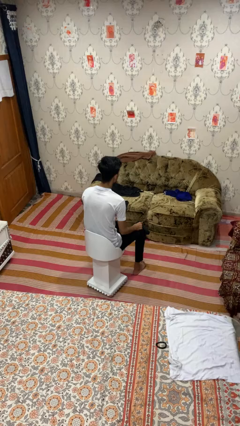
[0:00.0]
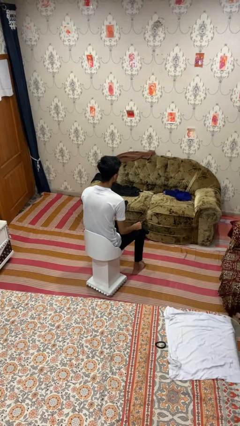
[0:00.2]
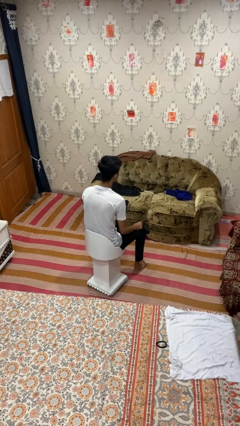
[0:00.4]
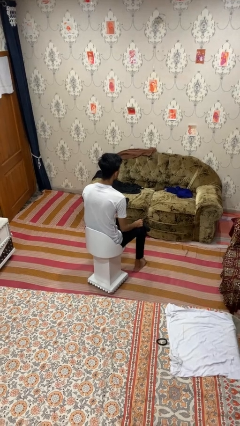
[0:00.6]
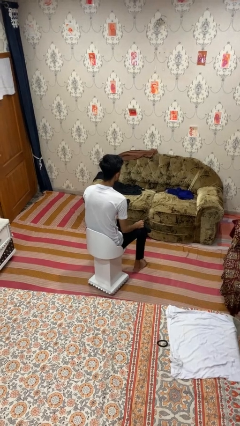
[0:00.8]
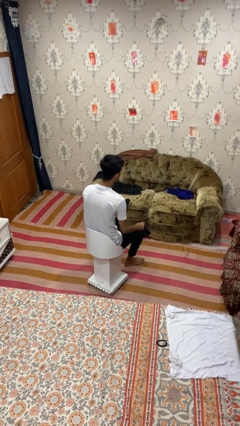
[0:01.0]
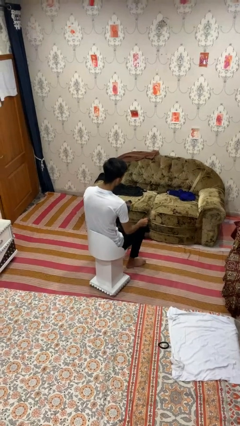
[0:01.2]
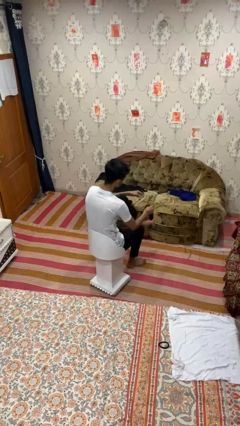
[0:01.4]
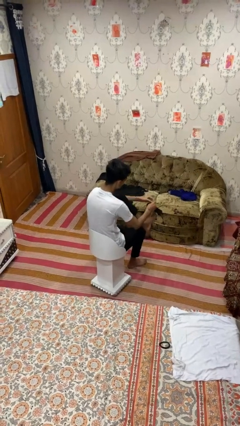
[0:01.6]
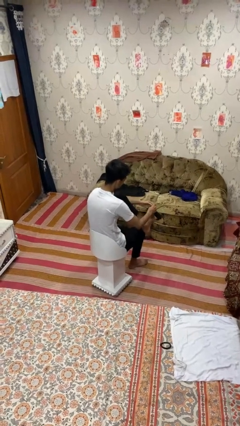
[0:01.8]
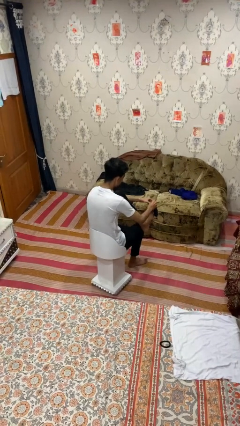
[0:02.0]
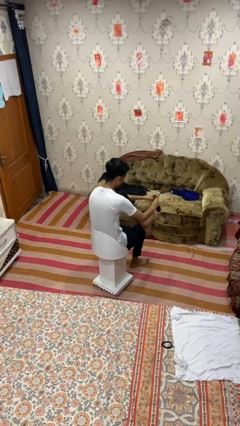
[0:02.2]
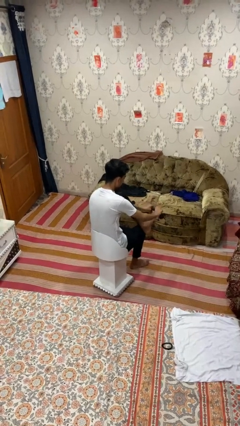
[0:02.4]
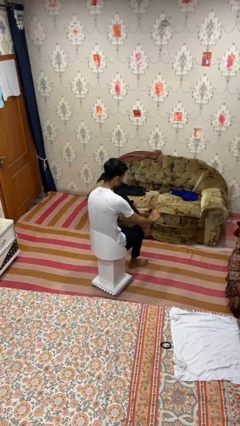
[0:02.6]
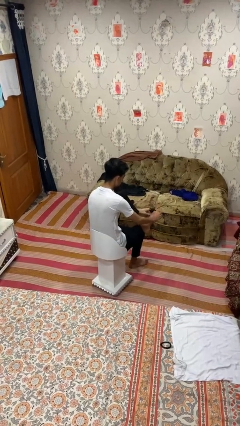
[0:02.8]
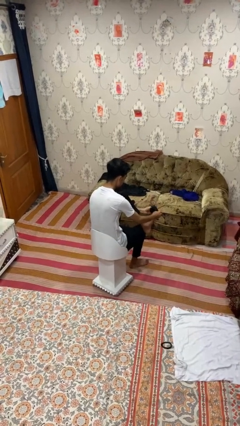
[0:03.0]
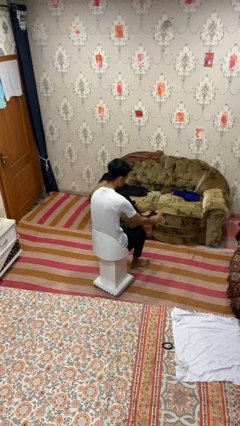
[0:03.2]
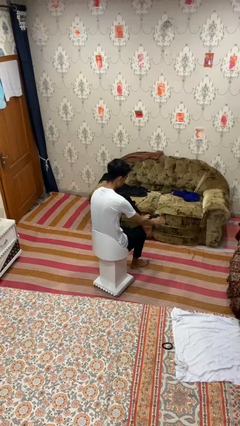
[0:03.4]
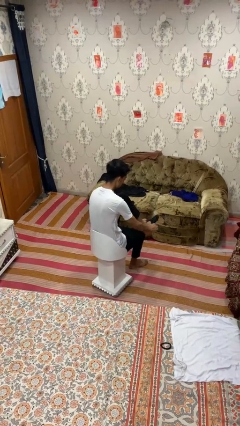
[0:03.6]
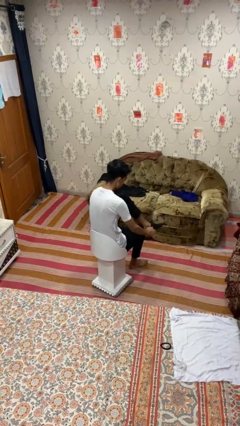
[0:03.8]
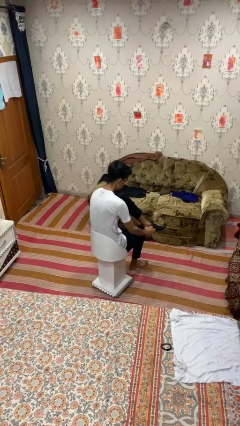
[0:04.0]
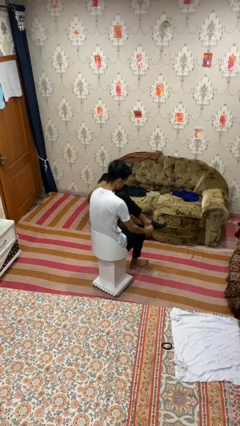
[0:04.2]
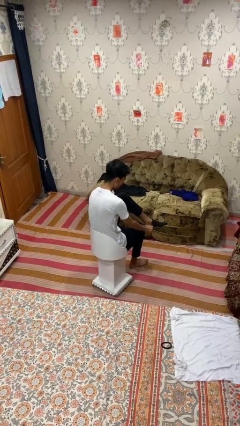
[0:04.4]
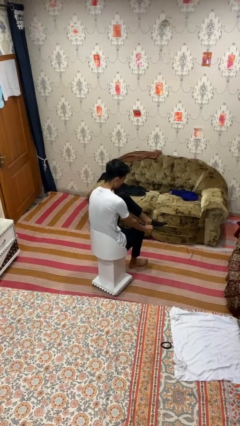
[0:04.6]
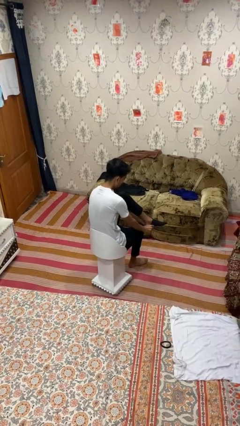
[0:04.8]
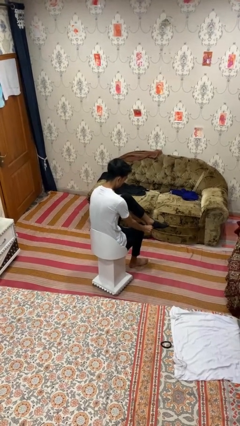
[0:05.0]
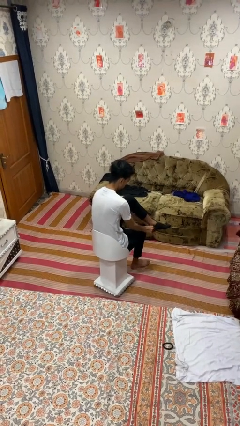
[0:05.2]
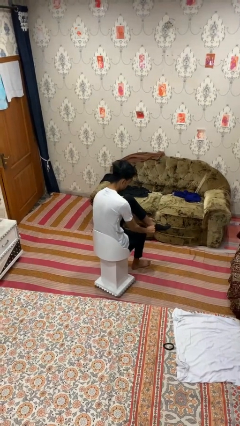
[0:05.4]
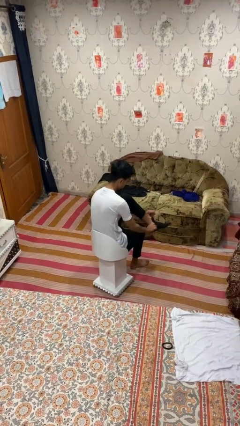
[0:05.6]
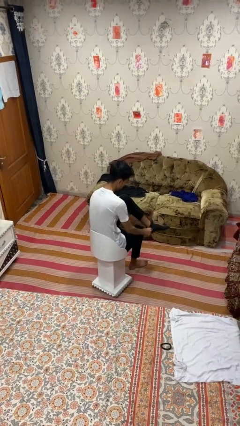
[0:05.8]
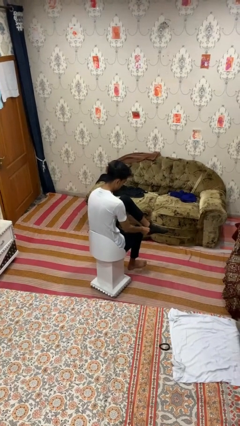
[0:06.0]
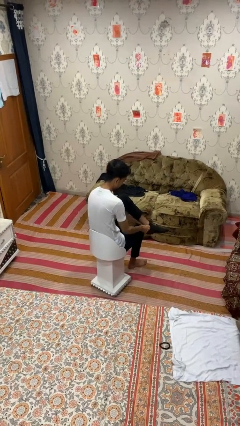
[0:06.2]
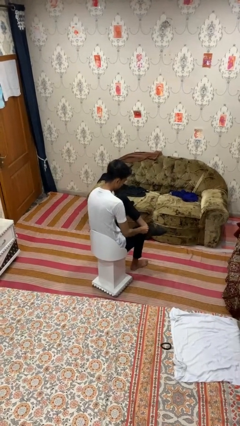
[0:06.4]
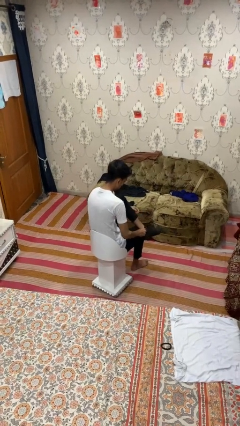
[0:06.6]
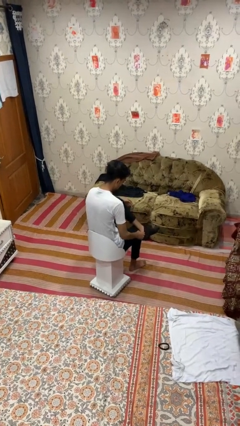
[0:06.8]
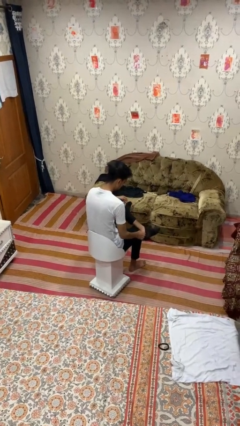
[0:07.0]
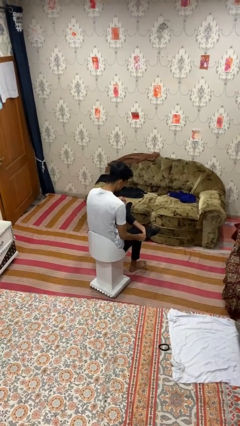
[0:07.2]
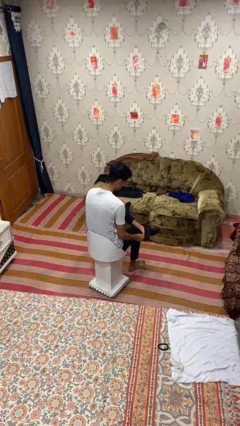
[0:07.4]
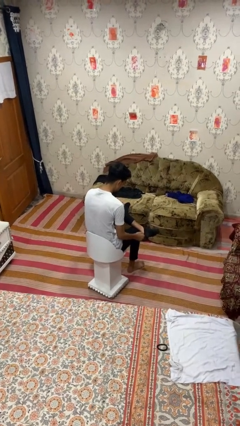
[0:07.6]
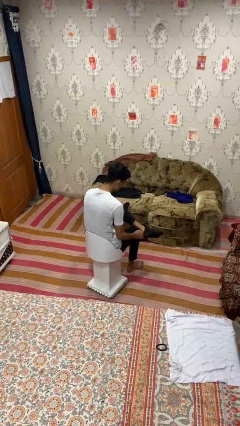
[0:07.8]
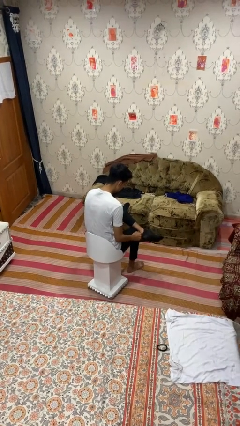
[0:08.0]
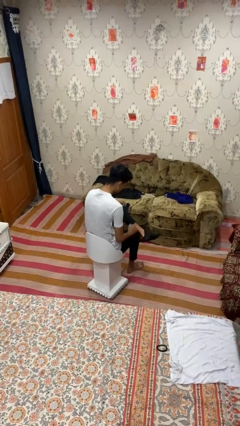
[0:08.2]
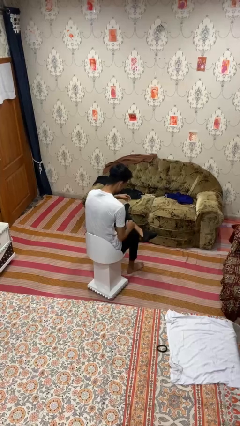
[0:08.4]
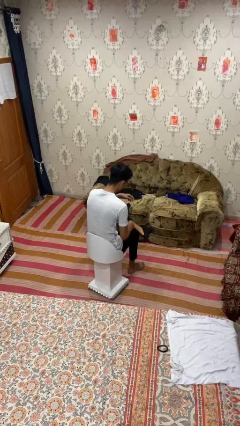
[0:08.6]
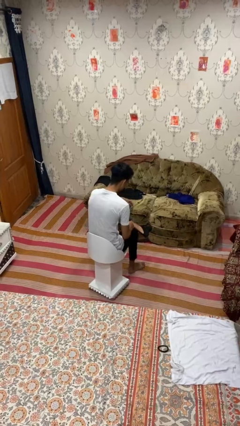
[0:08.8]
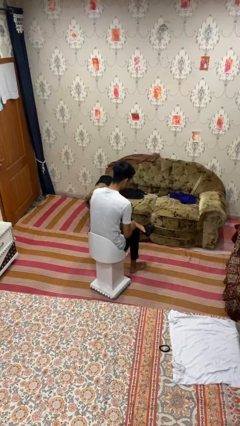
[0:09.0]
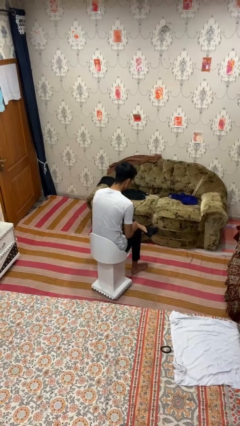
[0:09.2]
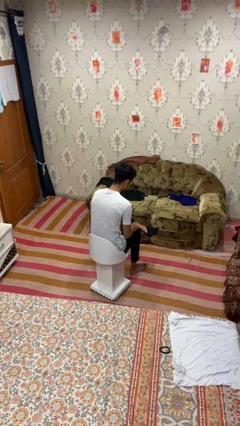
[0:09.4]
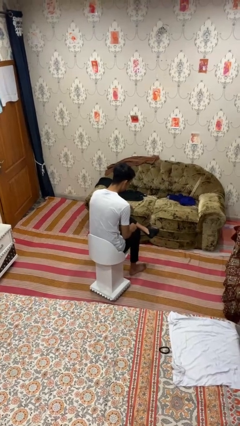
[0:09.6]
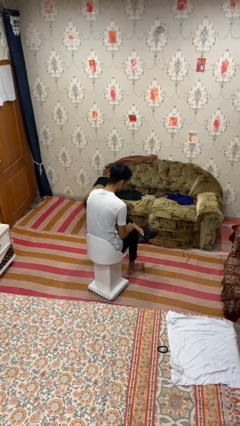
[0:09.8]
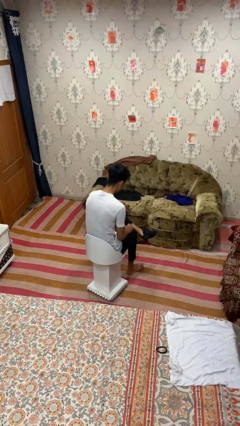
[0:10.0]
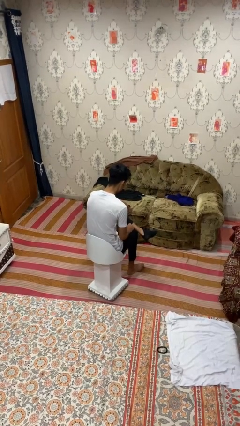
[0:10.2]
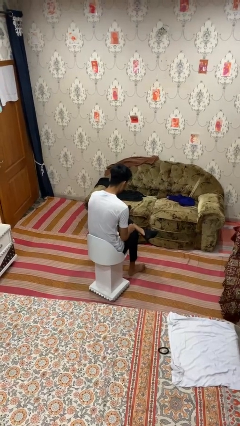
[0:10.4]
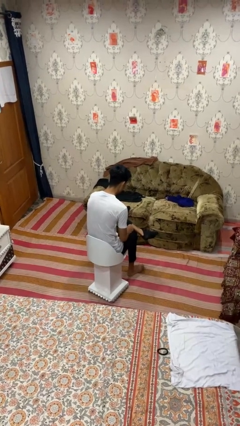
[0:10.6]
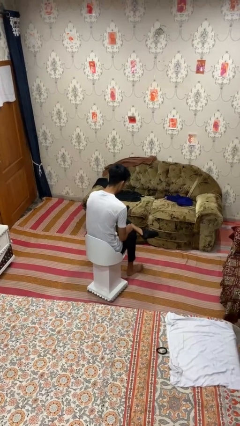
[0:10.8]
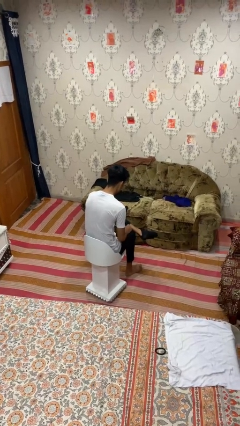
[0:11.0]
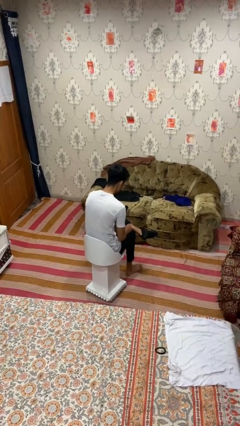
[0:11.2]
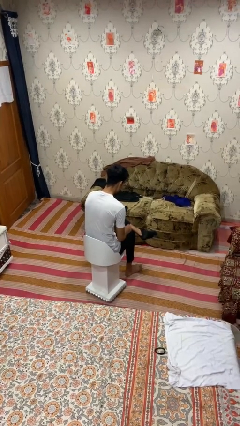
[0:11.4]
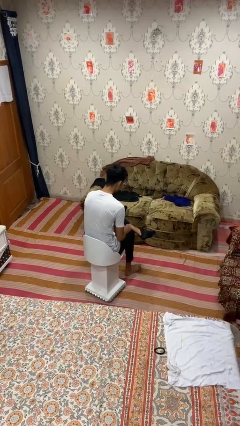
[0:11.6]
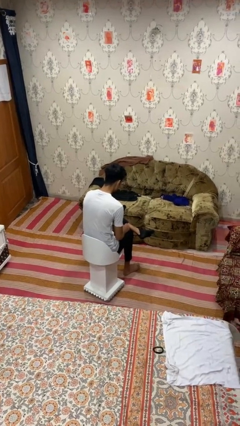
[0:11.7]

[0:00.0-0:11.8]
person puts on socks

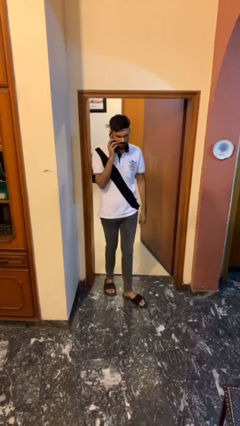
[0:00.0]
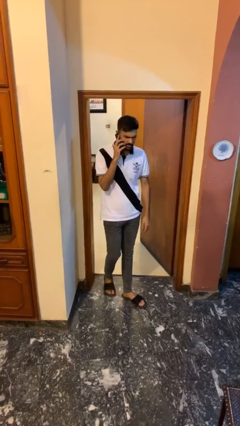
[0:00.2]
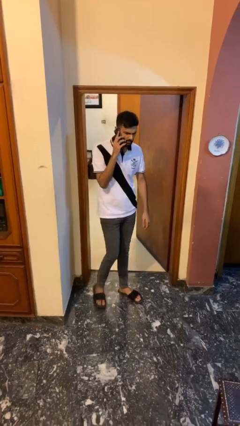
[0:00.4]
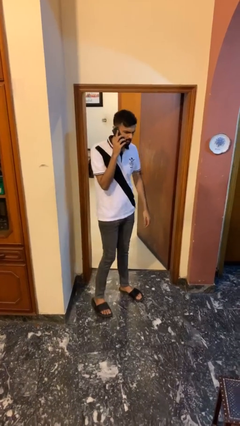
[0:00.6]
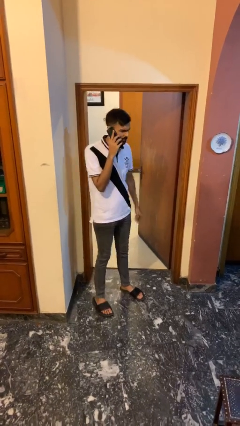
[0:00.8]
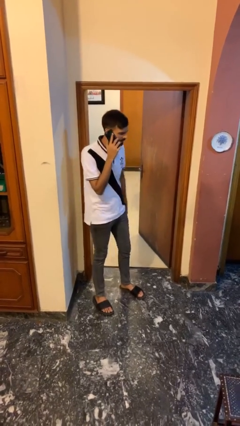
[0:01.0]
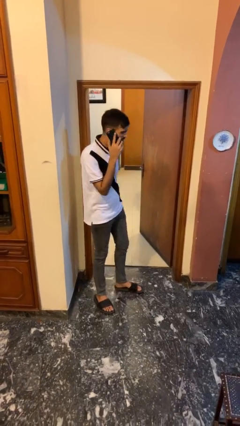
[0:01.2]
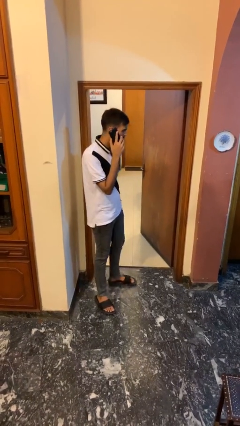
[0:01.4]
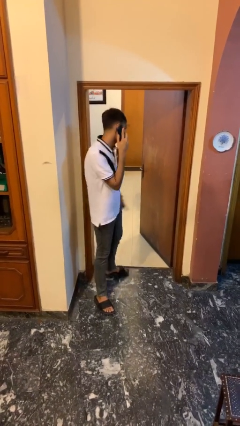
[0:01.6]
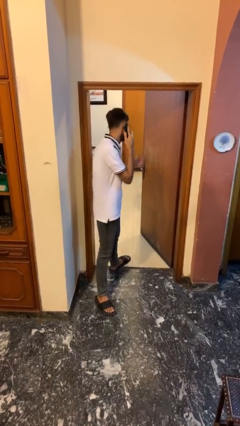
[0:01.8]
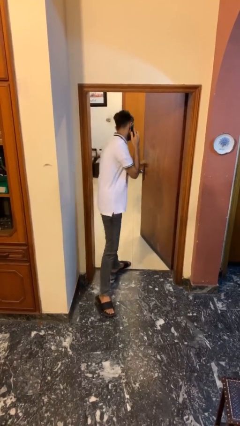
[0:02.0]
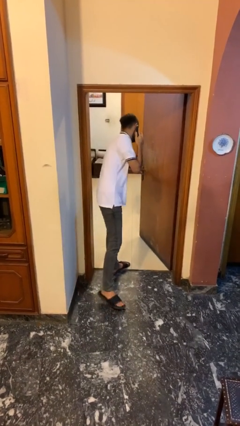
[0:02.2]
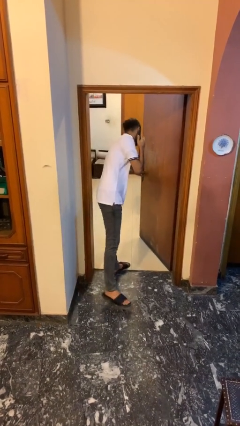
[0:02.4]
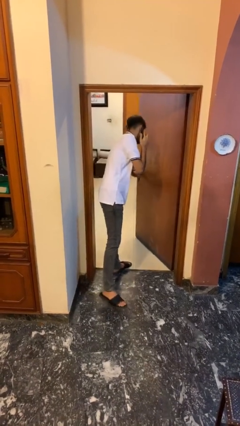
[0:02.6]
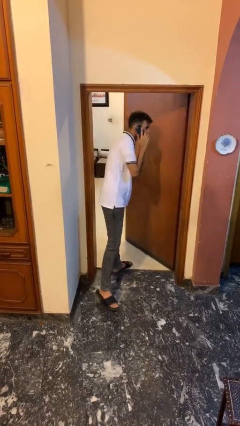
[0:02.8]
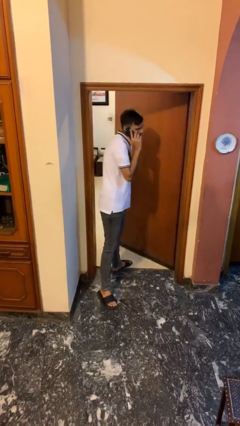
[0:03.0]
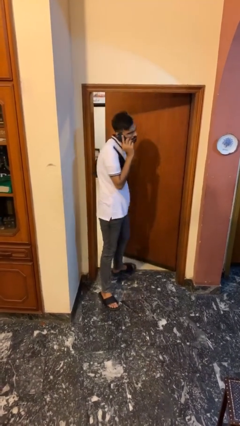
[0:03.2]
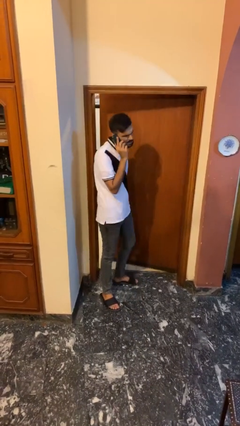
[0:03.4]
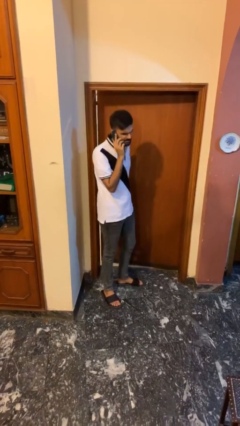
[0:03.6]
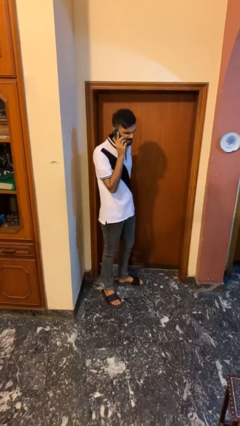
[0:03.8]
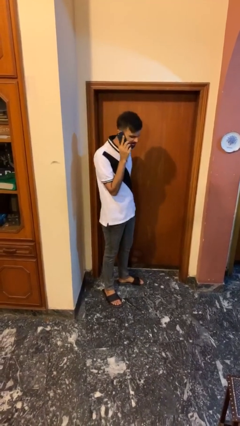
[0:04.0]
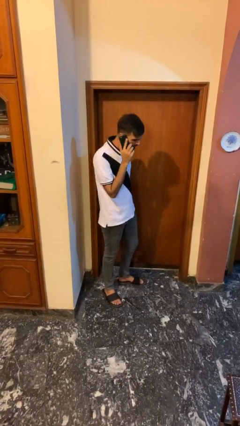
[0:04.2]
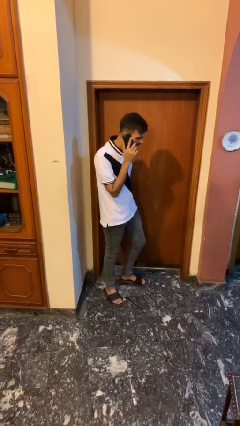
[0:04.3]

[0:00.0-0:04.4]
person closes facility door

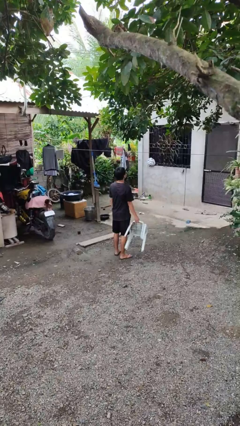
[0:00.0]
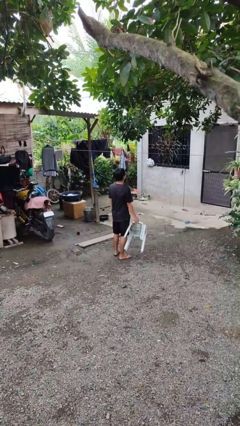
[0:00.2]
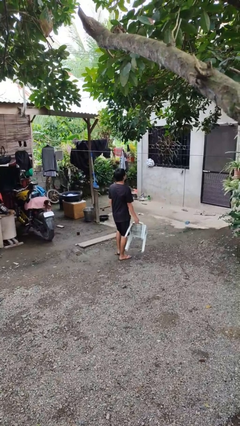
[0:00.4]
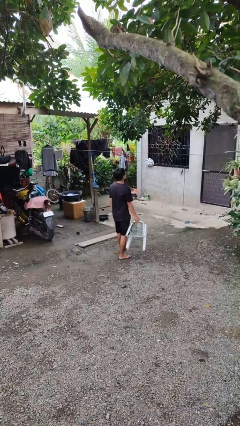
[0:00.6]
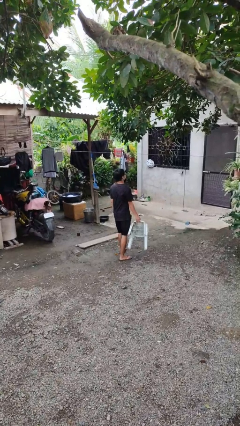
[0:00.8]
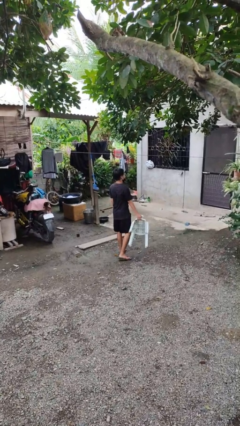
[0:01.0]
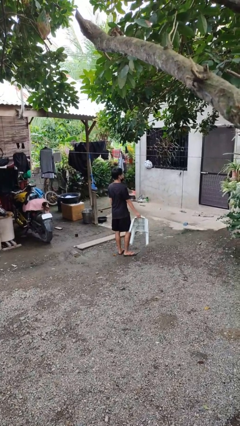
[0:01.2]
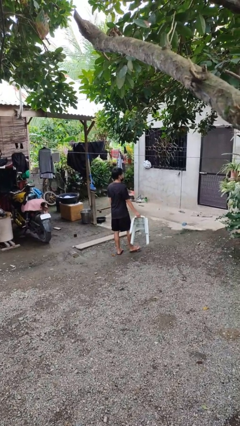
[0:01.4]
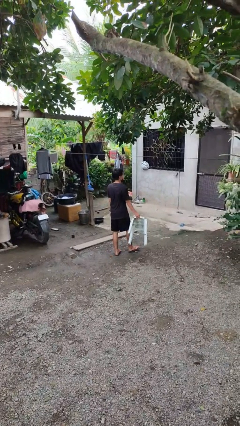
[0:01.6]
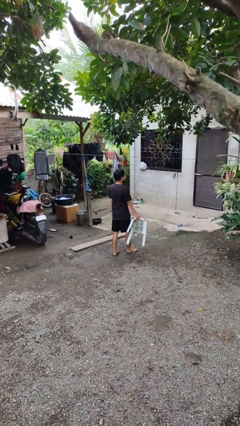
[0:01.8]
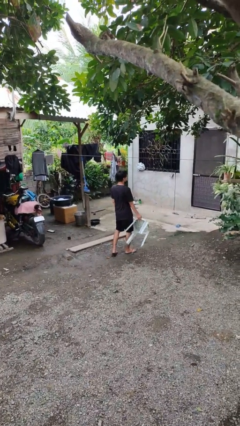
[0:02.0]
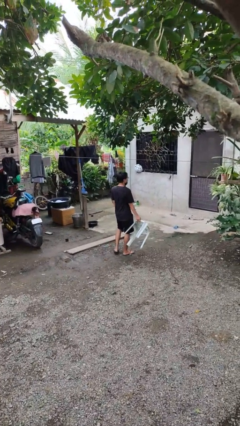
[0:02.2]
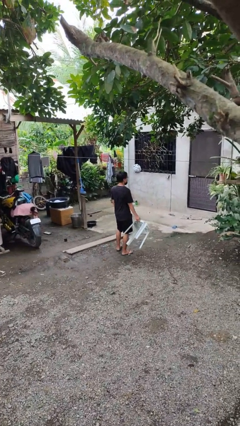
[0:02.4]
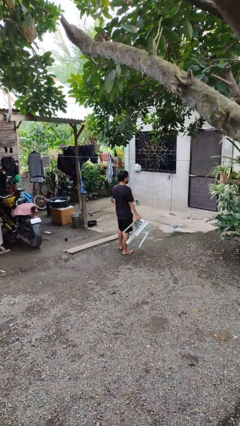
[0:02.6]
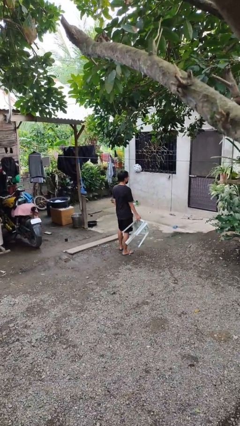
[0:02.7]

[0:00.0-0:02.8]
person carries furniture
